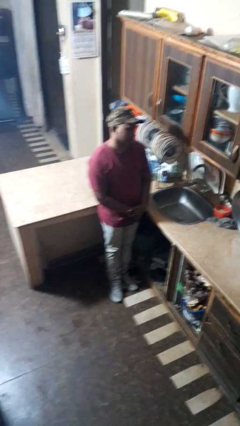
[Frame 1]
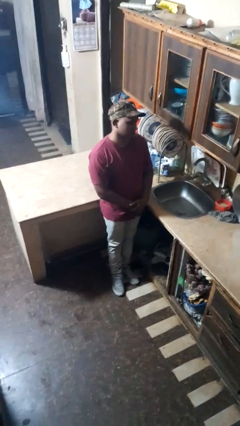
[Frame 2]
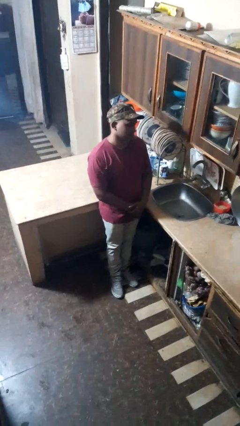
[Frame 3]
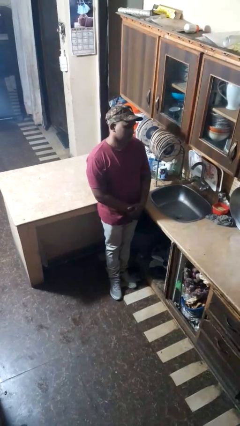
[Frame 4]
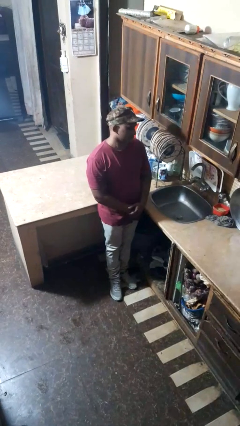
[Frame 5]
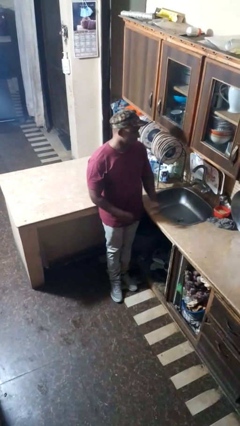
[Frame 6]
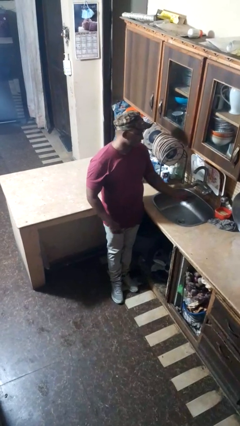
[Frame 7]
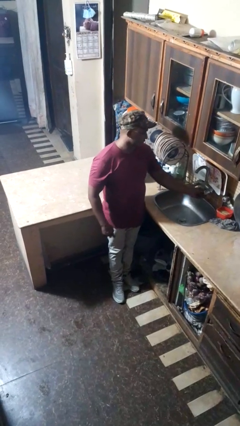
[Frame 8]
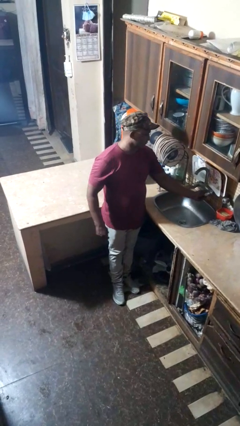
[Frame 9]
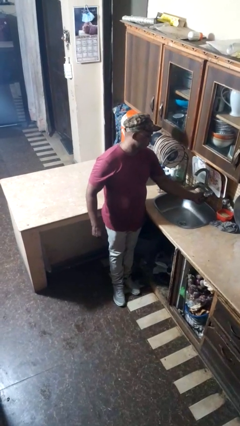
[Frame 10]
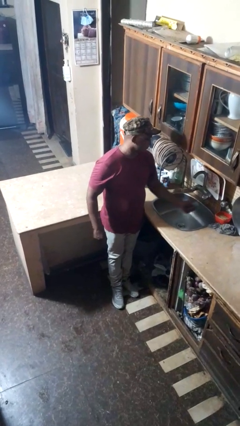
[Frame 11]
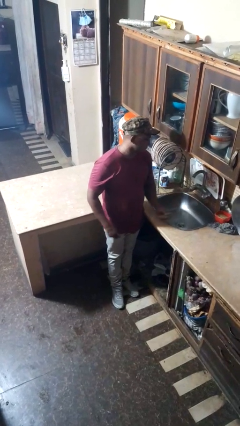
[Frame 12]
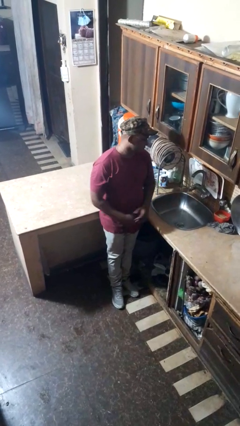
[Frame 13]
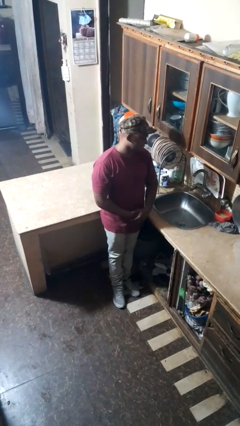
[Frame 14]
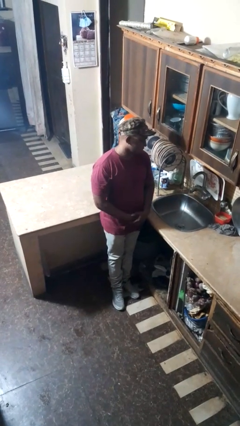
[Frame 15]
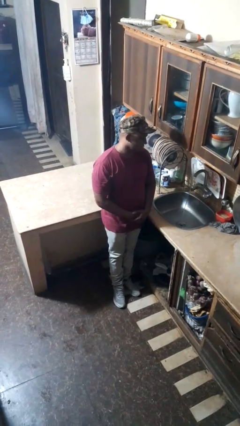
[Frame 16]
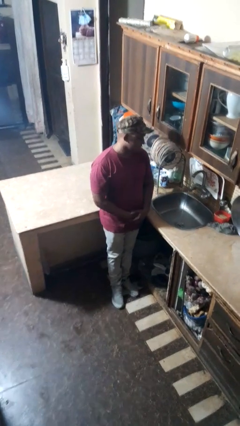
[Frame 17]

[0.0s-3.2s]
person turns on faucet

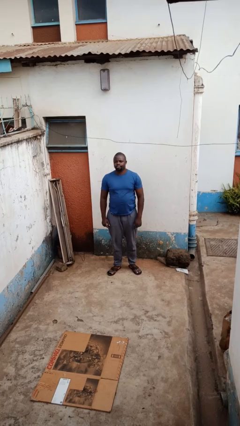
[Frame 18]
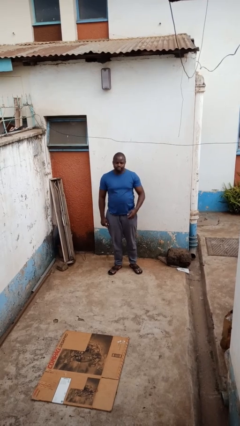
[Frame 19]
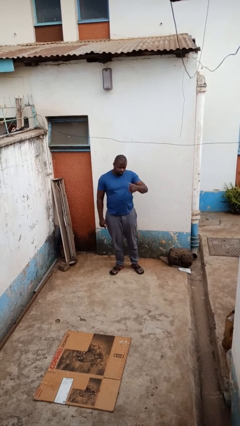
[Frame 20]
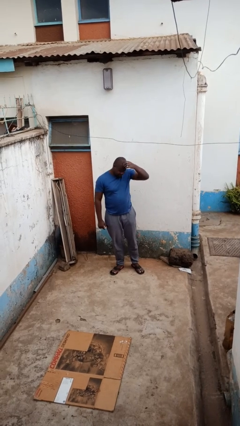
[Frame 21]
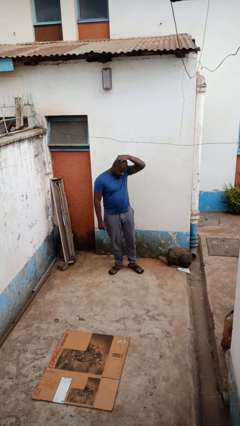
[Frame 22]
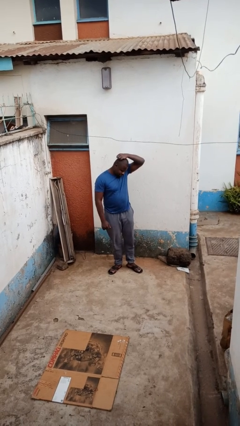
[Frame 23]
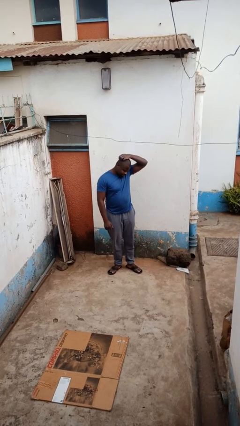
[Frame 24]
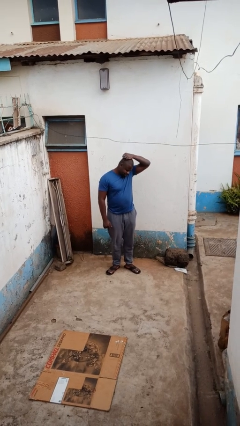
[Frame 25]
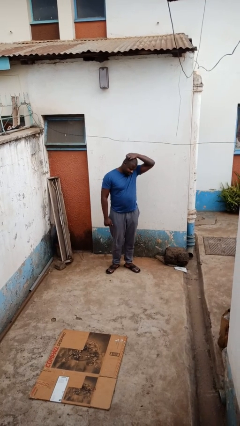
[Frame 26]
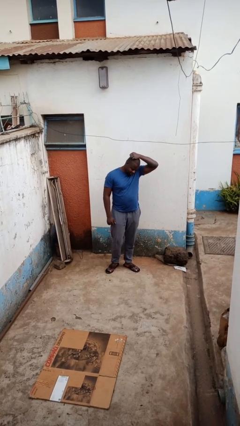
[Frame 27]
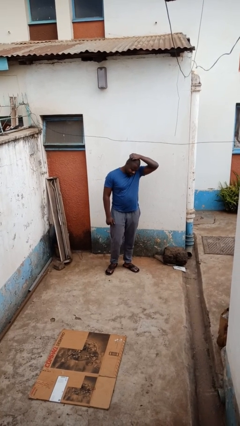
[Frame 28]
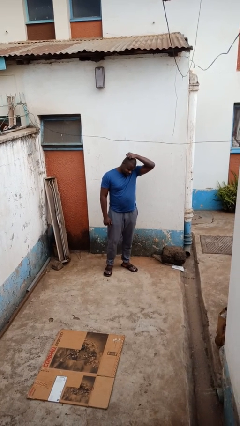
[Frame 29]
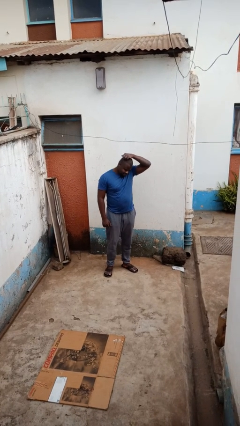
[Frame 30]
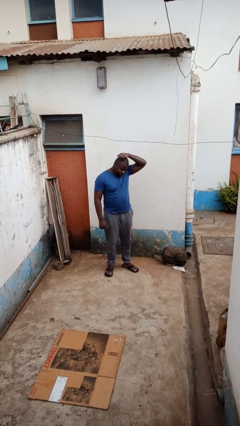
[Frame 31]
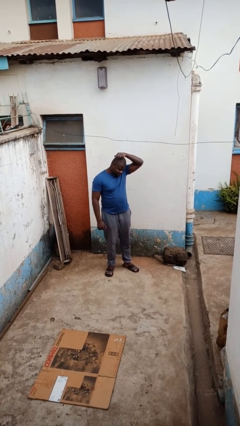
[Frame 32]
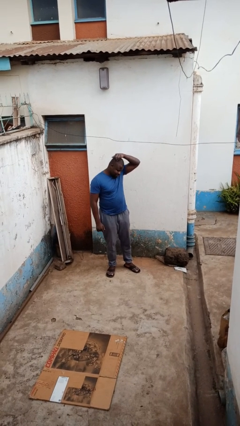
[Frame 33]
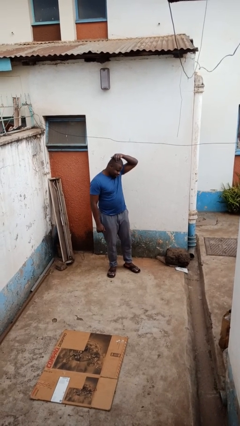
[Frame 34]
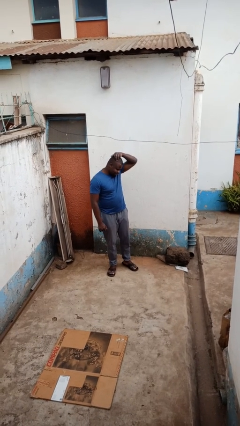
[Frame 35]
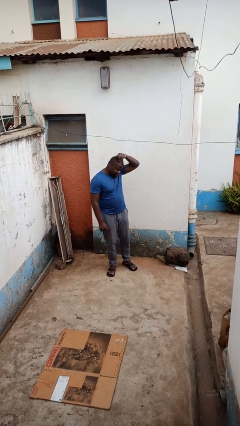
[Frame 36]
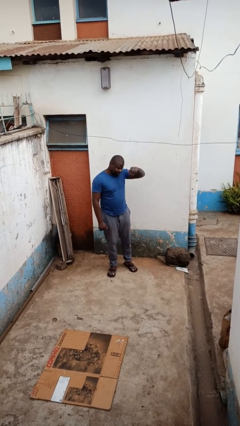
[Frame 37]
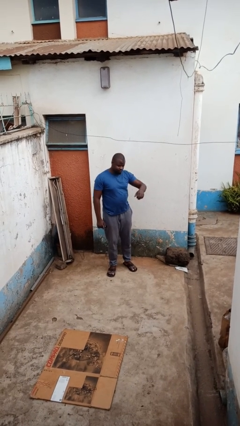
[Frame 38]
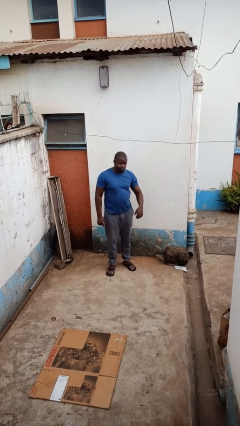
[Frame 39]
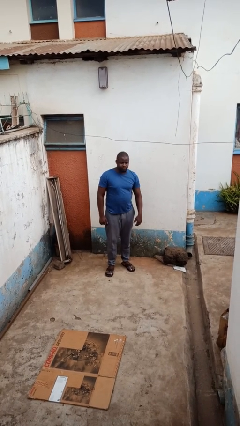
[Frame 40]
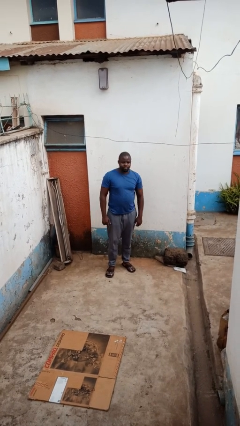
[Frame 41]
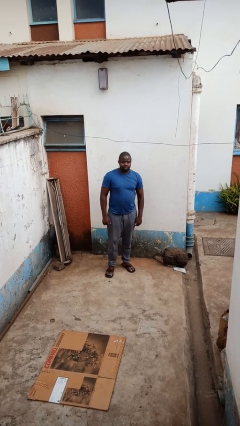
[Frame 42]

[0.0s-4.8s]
person scratches face

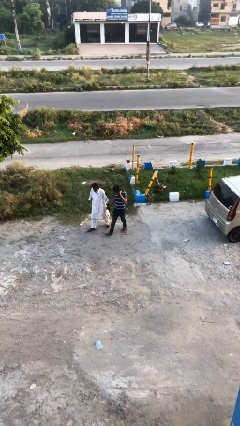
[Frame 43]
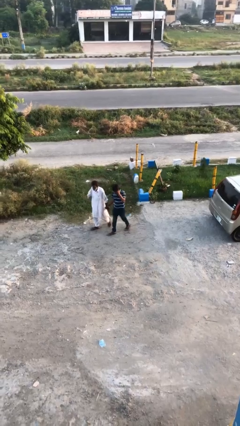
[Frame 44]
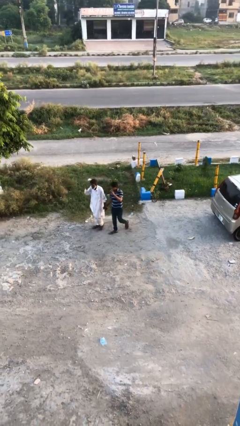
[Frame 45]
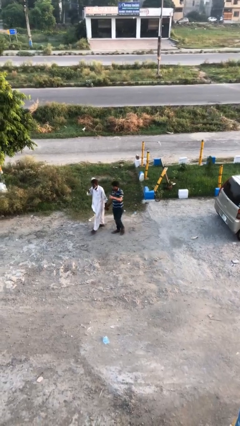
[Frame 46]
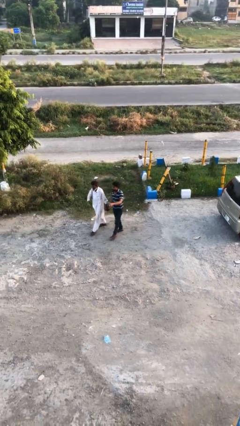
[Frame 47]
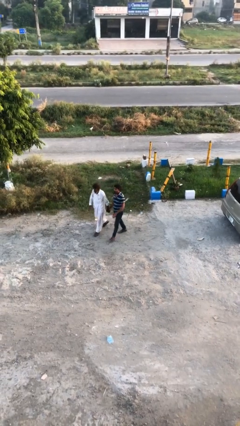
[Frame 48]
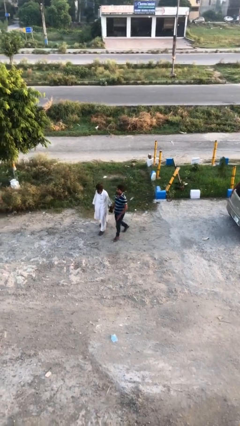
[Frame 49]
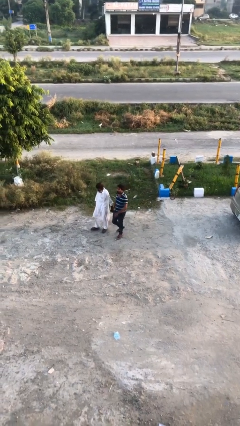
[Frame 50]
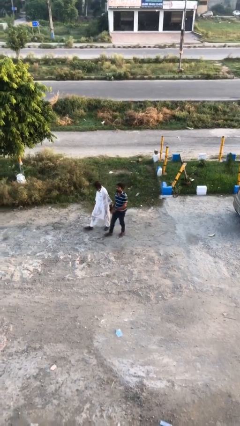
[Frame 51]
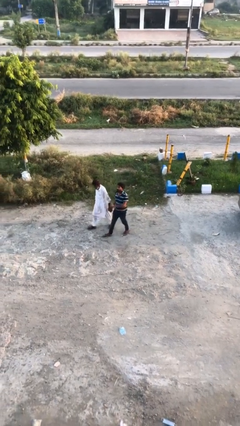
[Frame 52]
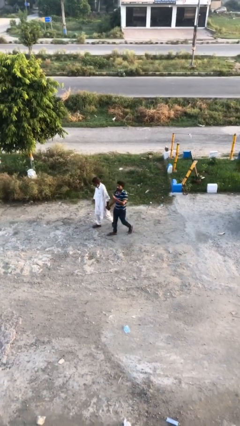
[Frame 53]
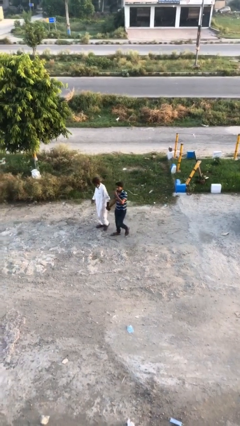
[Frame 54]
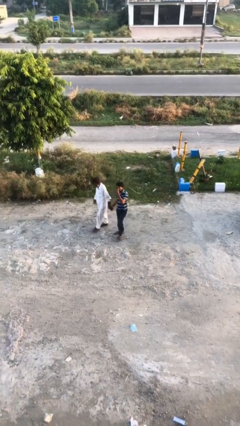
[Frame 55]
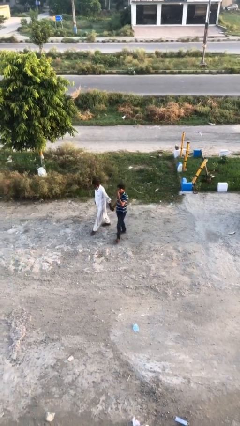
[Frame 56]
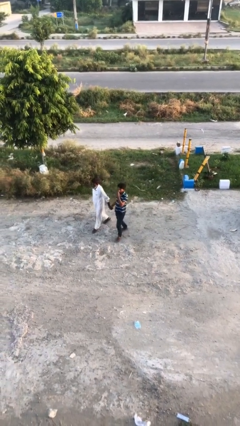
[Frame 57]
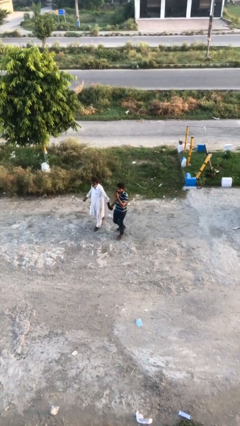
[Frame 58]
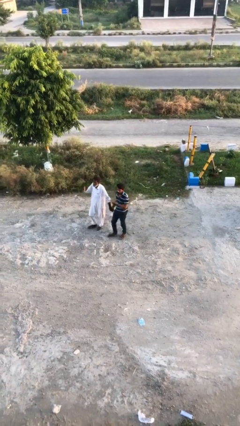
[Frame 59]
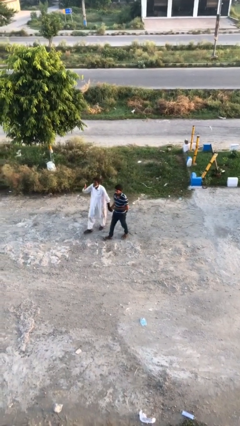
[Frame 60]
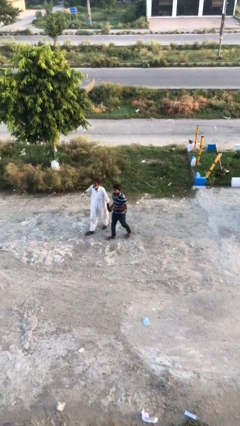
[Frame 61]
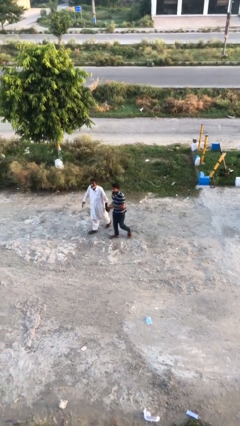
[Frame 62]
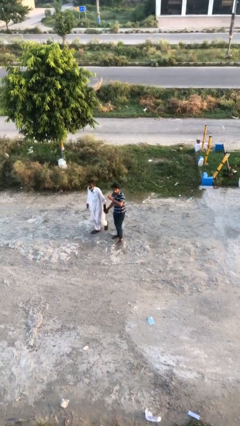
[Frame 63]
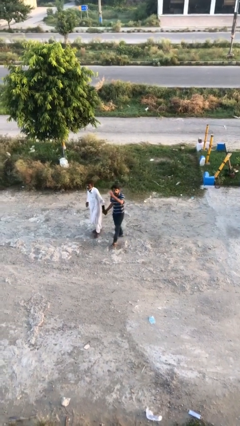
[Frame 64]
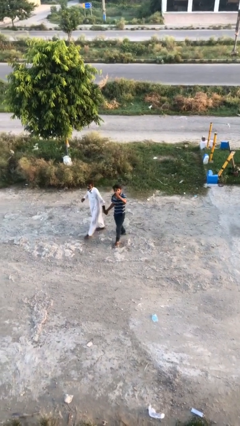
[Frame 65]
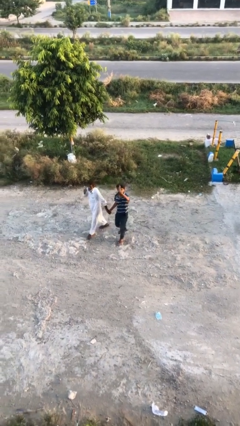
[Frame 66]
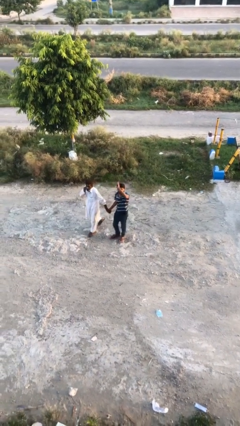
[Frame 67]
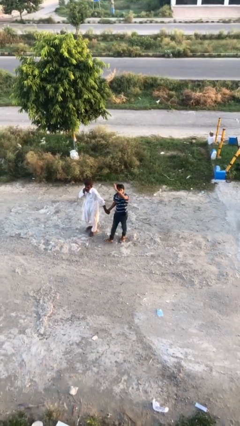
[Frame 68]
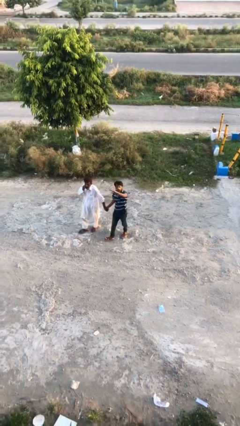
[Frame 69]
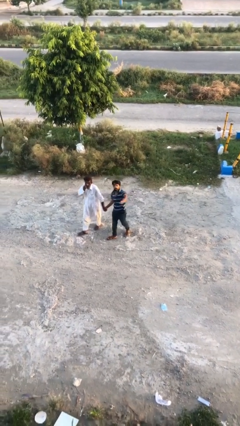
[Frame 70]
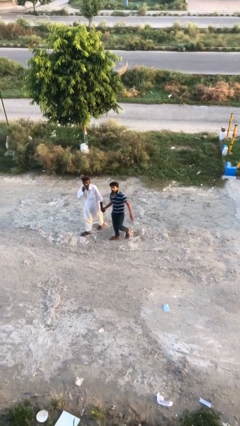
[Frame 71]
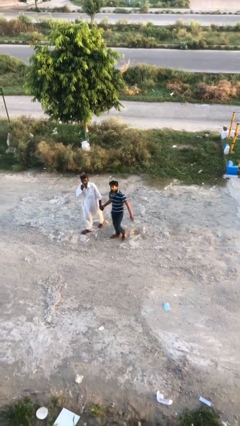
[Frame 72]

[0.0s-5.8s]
person holds hand

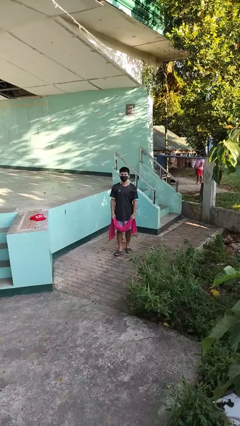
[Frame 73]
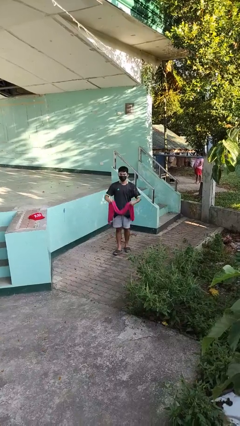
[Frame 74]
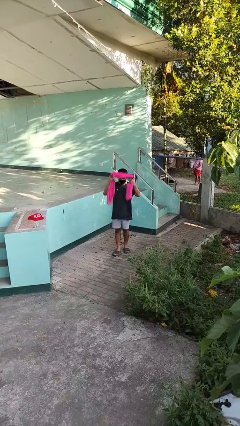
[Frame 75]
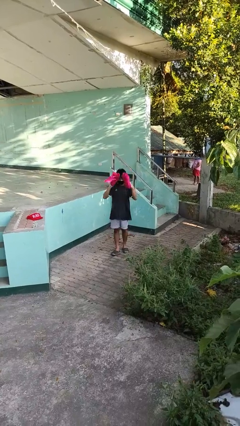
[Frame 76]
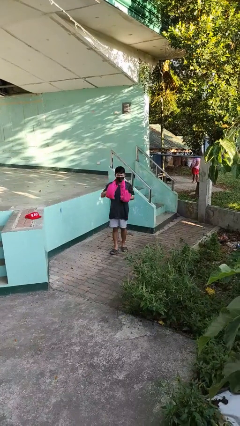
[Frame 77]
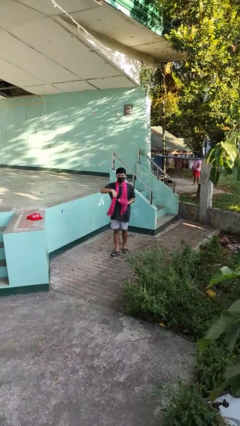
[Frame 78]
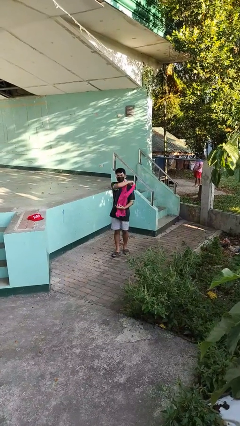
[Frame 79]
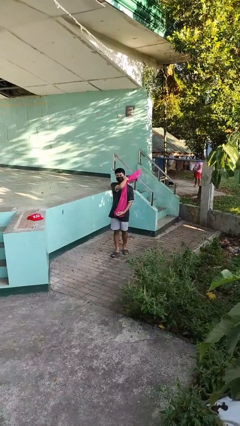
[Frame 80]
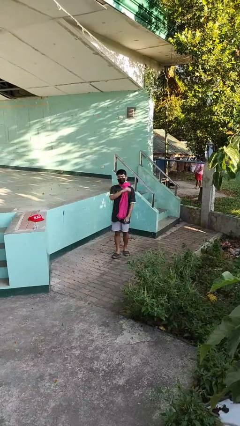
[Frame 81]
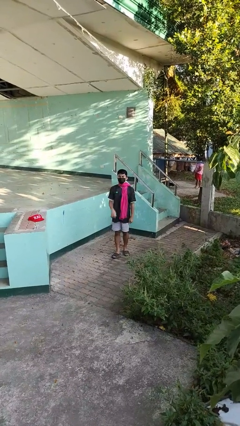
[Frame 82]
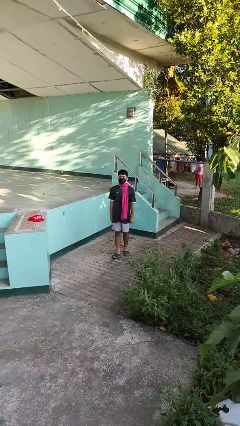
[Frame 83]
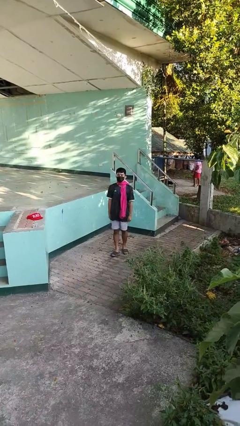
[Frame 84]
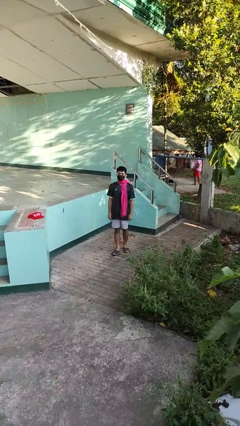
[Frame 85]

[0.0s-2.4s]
person puts on scarf

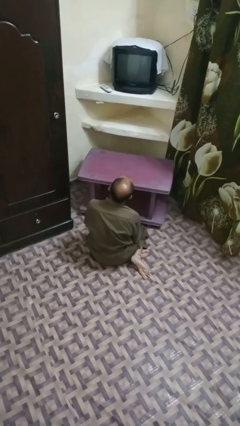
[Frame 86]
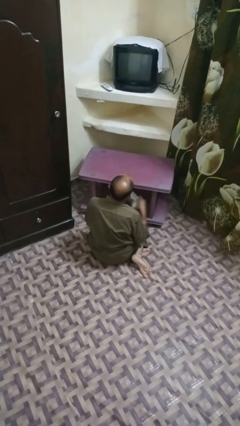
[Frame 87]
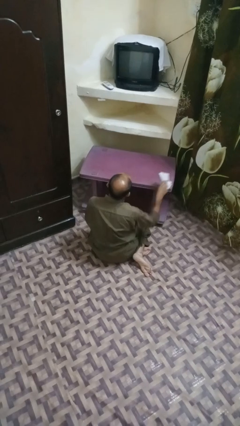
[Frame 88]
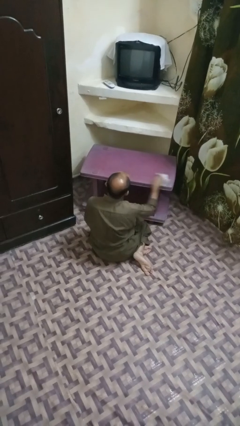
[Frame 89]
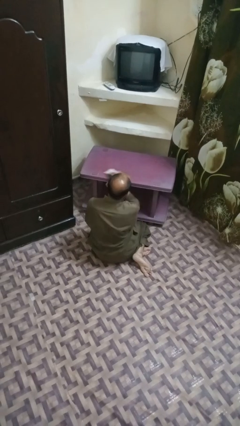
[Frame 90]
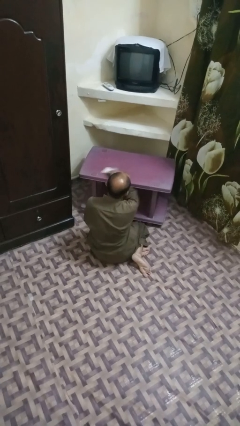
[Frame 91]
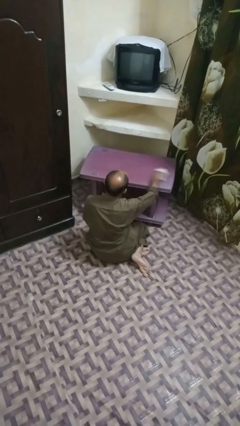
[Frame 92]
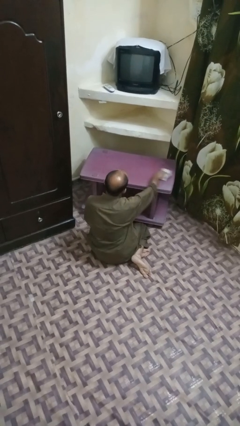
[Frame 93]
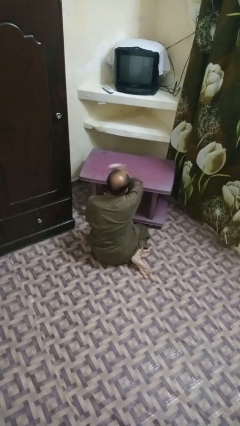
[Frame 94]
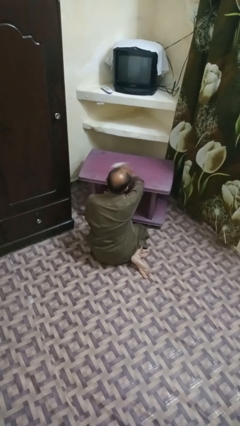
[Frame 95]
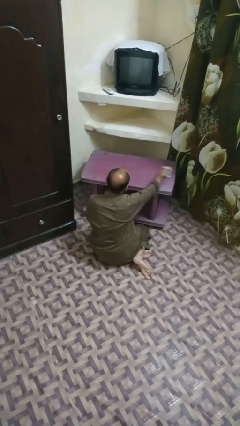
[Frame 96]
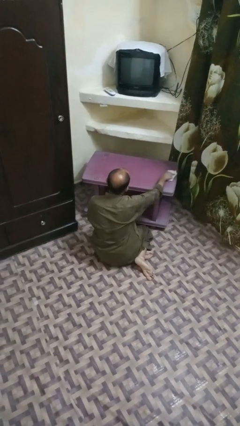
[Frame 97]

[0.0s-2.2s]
person cleans table with rag
